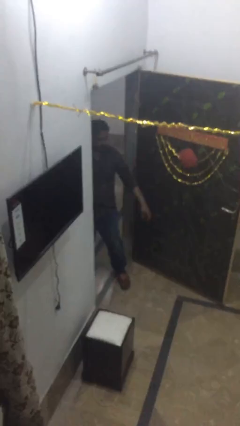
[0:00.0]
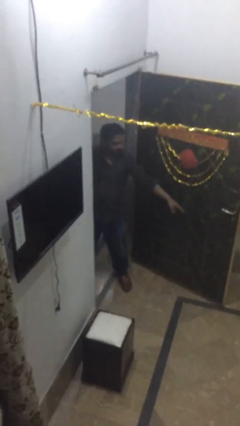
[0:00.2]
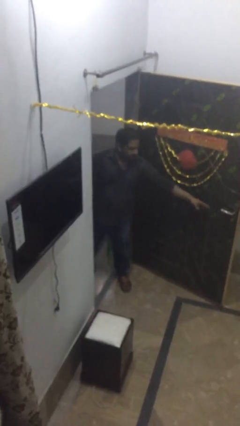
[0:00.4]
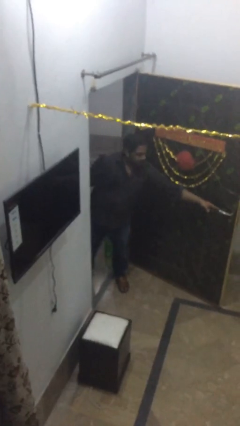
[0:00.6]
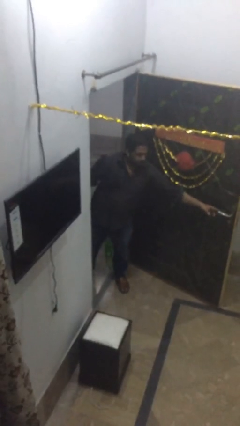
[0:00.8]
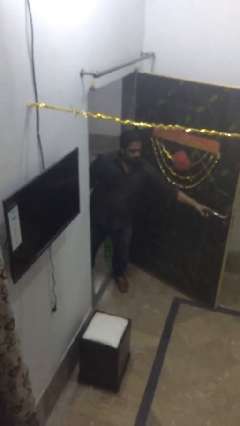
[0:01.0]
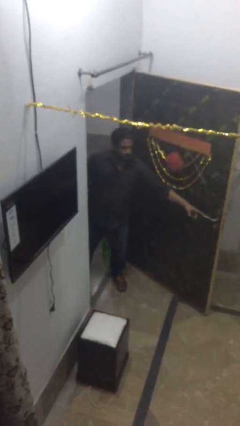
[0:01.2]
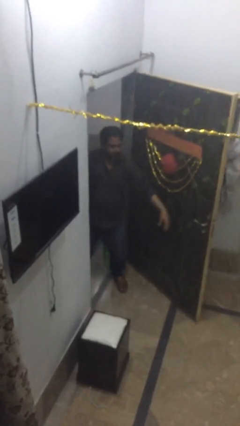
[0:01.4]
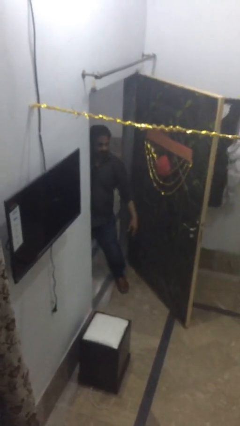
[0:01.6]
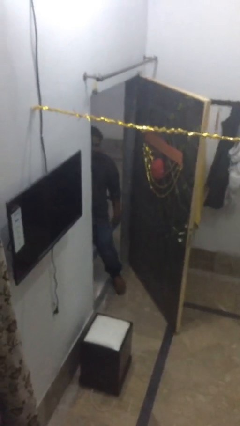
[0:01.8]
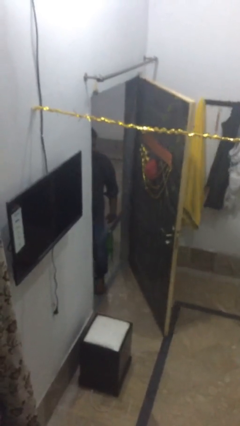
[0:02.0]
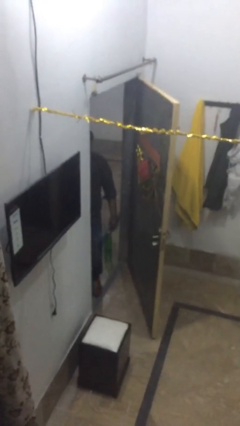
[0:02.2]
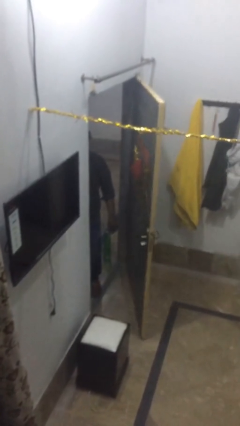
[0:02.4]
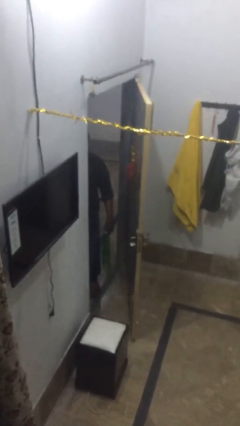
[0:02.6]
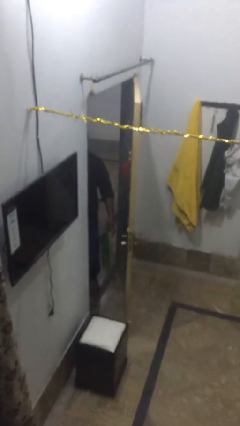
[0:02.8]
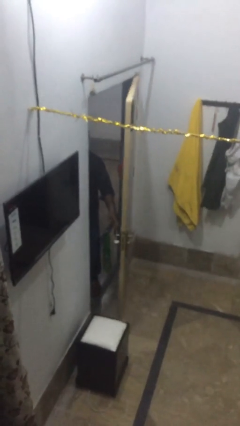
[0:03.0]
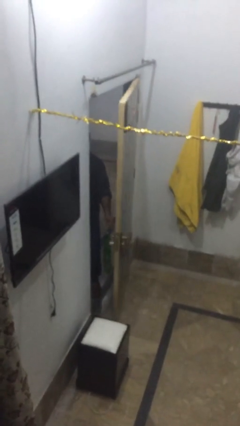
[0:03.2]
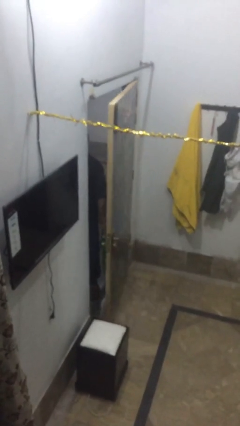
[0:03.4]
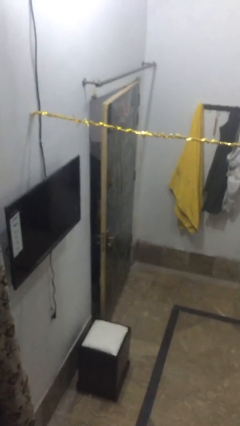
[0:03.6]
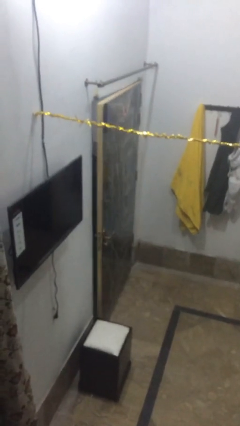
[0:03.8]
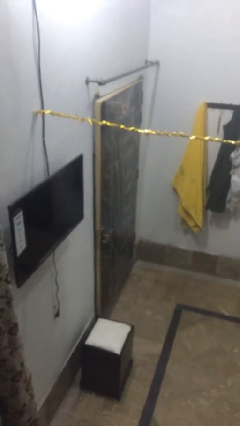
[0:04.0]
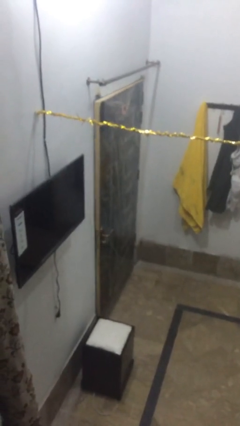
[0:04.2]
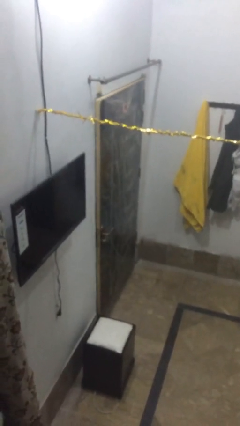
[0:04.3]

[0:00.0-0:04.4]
person closes facility door

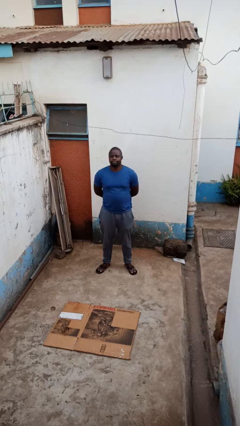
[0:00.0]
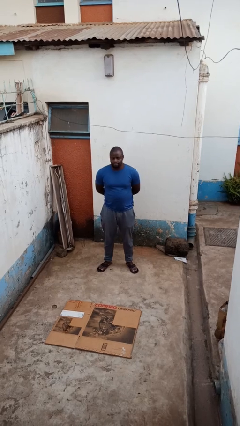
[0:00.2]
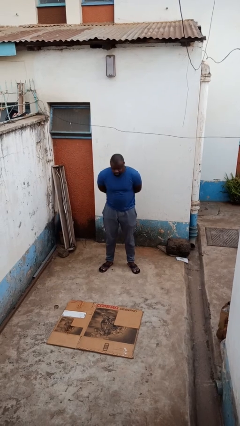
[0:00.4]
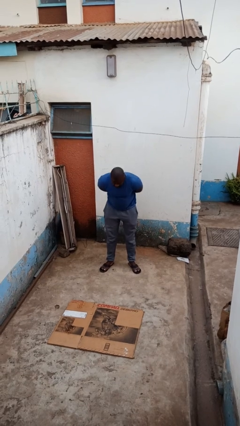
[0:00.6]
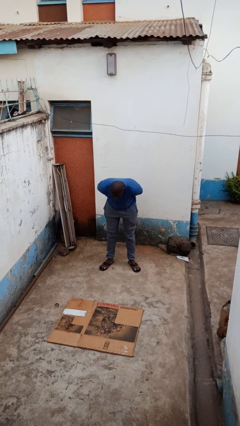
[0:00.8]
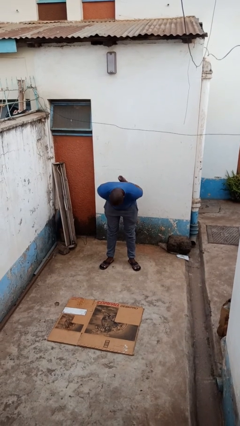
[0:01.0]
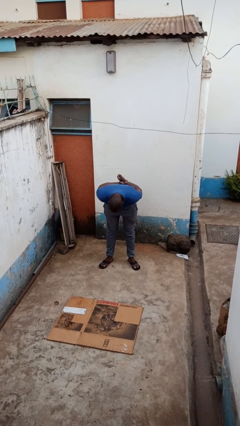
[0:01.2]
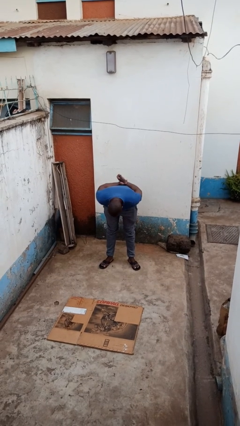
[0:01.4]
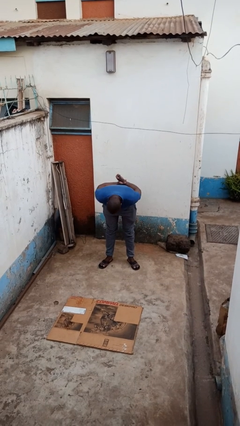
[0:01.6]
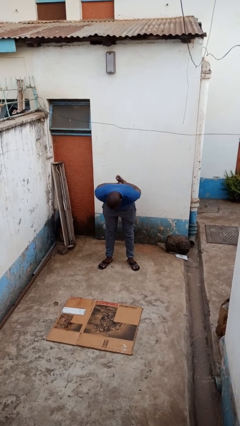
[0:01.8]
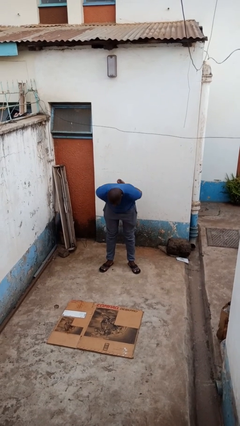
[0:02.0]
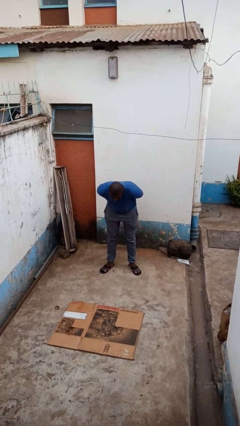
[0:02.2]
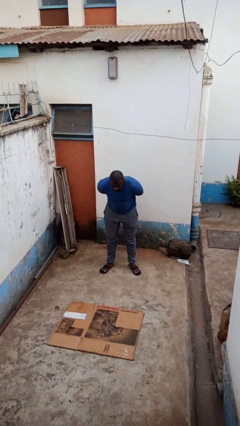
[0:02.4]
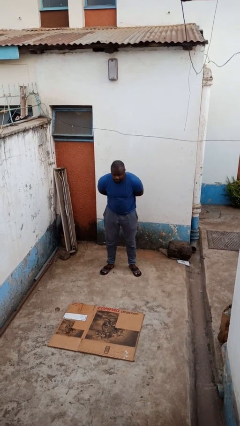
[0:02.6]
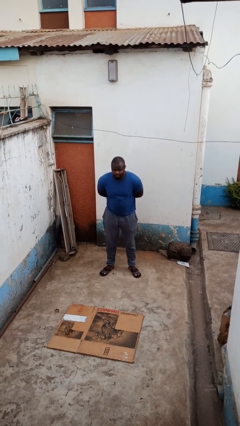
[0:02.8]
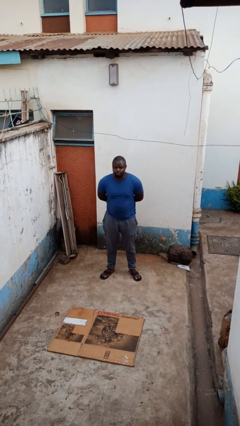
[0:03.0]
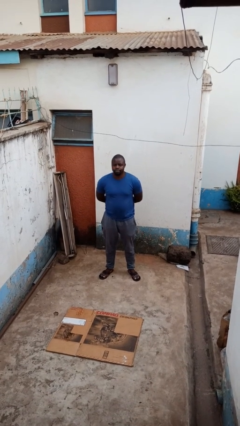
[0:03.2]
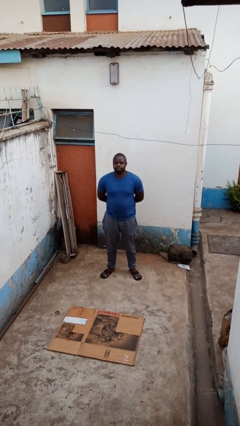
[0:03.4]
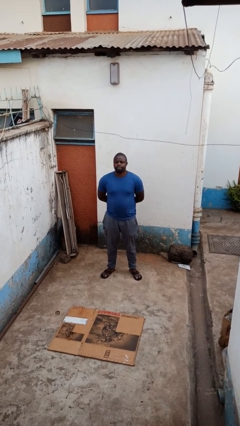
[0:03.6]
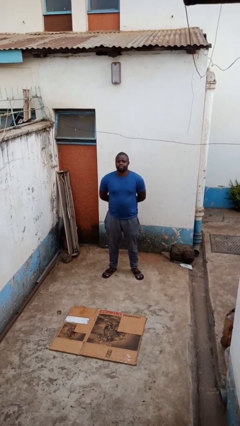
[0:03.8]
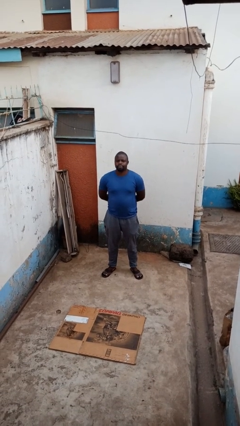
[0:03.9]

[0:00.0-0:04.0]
person bows

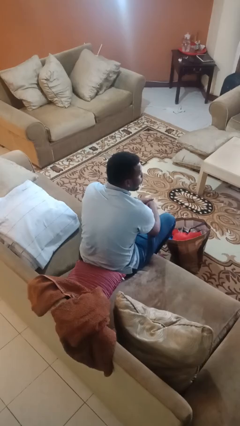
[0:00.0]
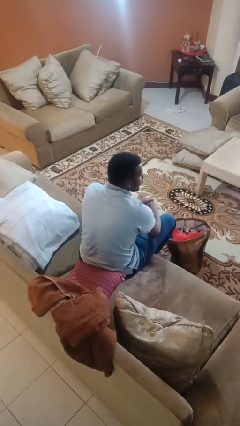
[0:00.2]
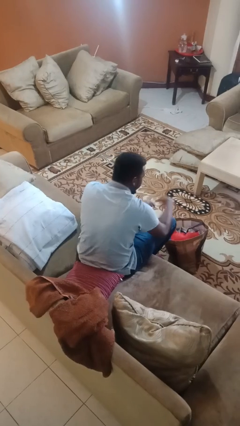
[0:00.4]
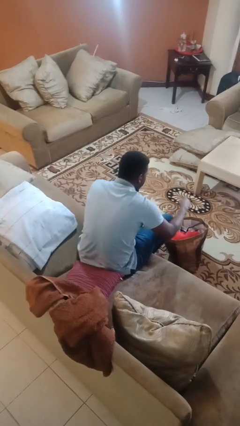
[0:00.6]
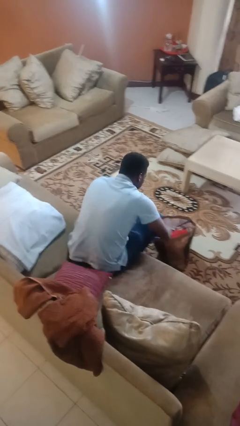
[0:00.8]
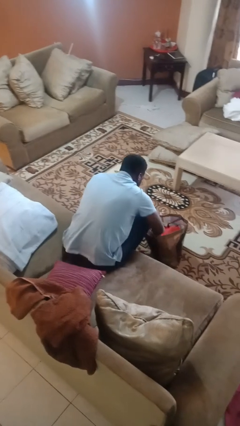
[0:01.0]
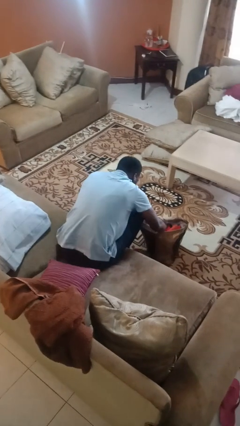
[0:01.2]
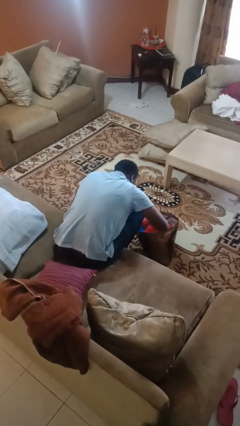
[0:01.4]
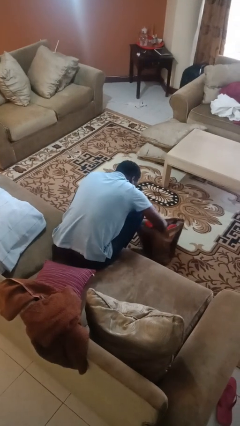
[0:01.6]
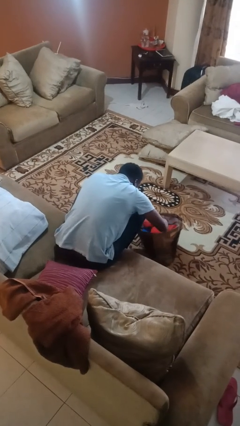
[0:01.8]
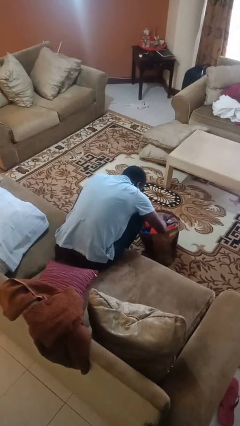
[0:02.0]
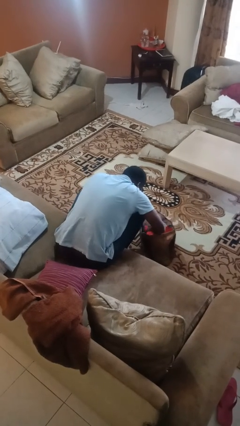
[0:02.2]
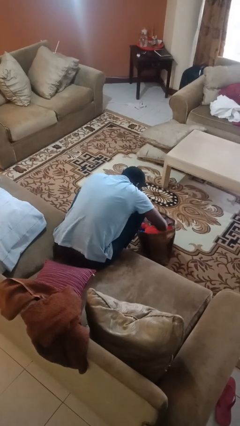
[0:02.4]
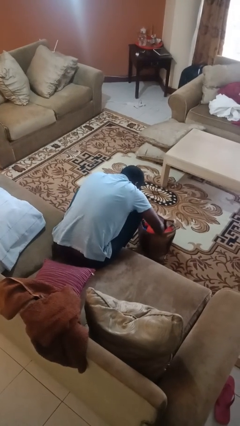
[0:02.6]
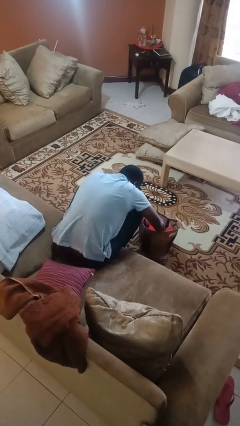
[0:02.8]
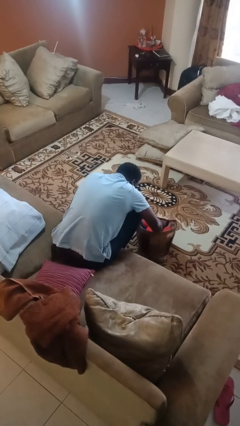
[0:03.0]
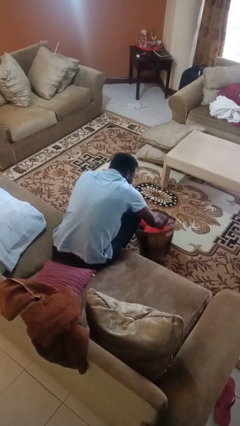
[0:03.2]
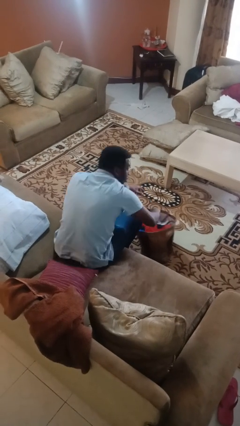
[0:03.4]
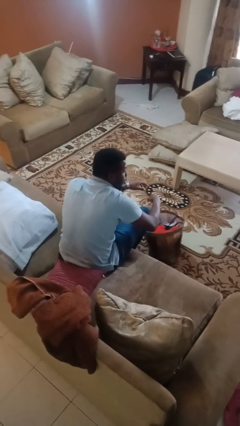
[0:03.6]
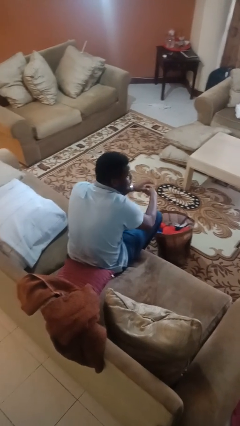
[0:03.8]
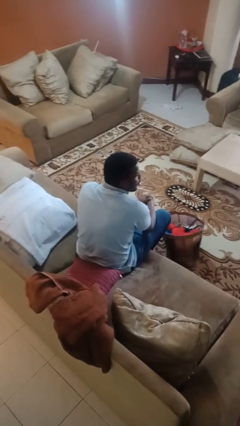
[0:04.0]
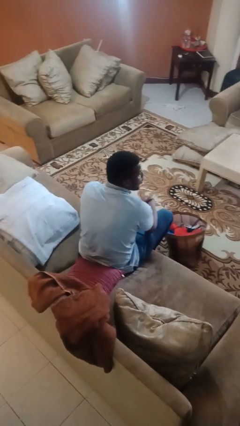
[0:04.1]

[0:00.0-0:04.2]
person searches in bag

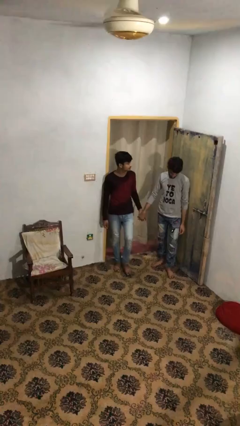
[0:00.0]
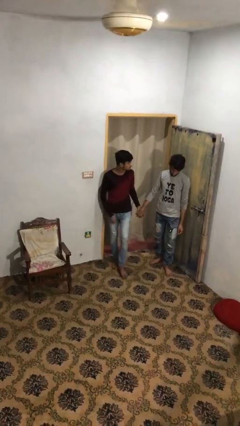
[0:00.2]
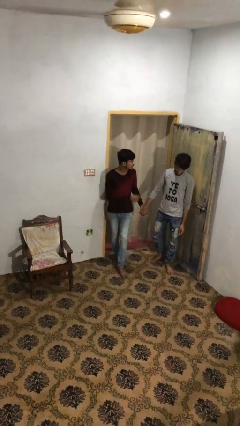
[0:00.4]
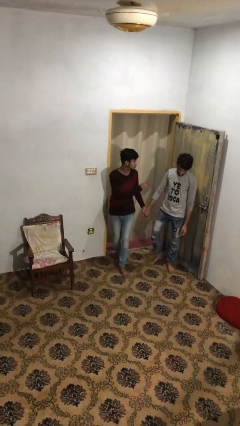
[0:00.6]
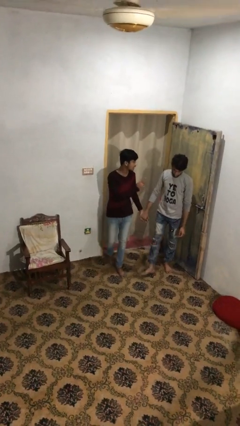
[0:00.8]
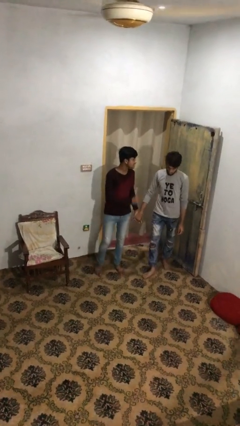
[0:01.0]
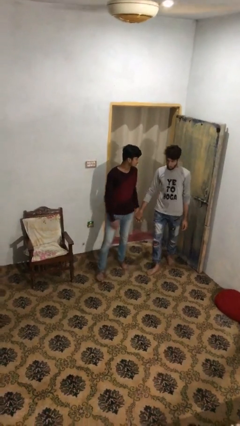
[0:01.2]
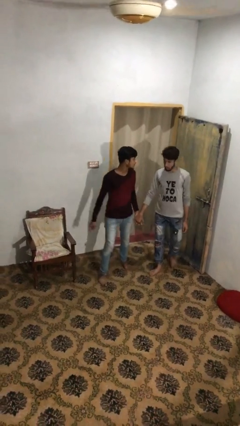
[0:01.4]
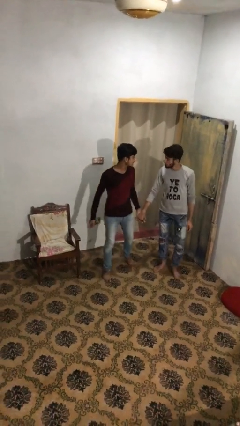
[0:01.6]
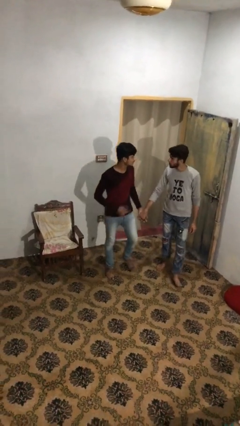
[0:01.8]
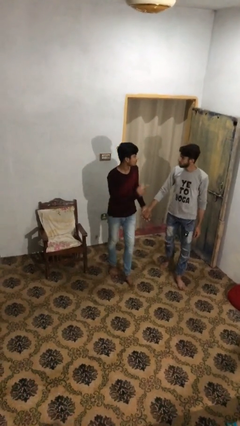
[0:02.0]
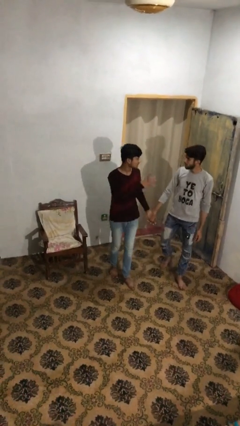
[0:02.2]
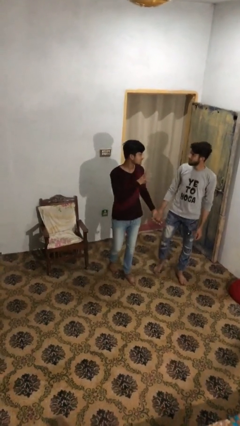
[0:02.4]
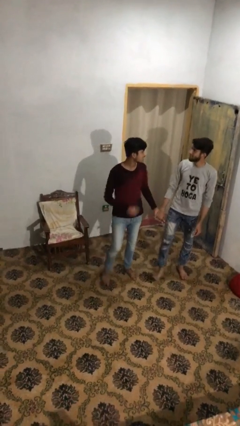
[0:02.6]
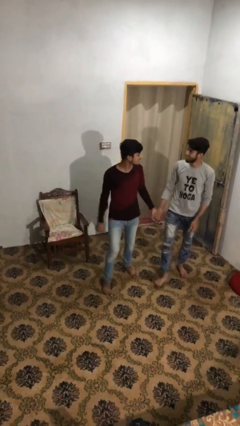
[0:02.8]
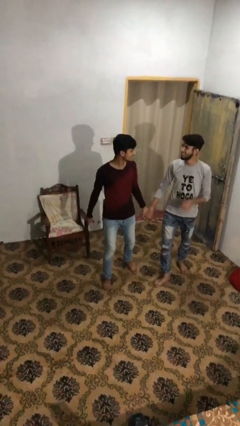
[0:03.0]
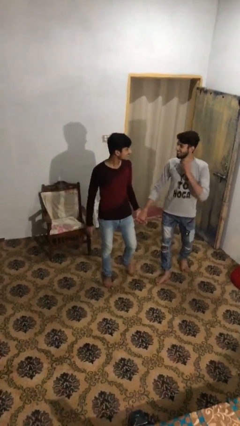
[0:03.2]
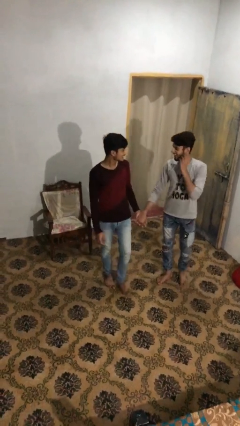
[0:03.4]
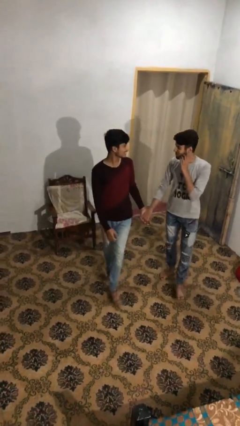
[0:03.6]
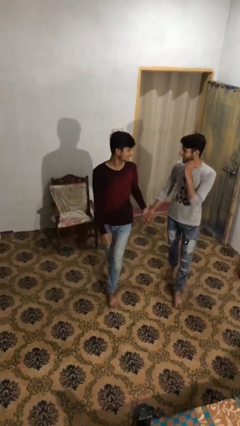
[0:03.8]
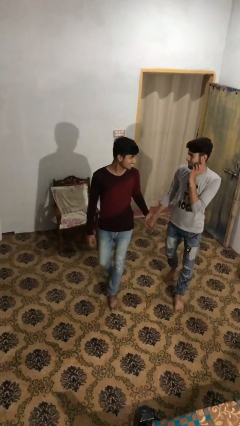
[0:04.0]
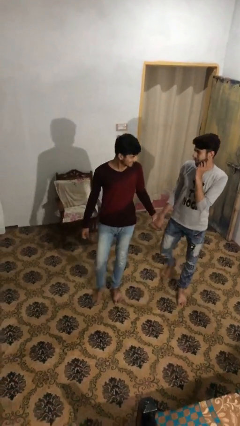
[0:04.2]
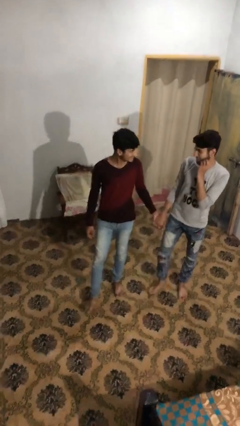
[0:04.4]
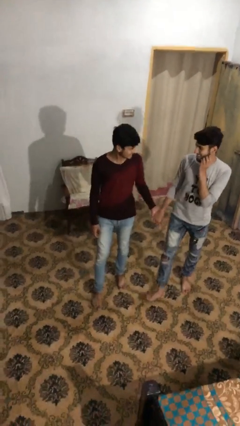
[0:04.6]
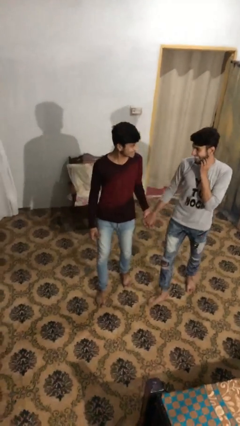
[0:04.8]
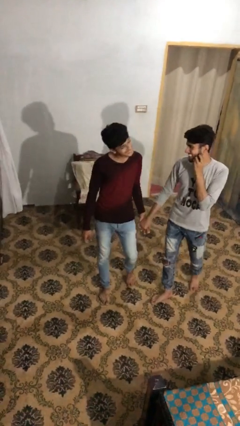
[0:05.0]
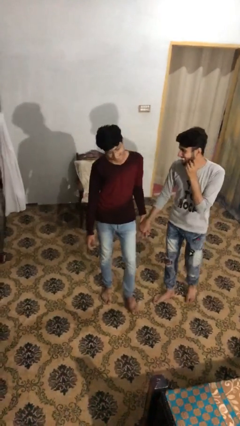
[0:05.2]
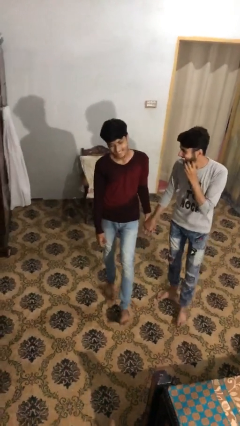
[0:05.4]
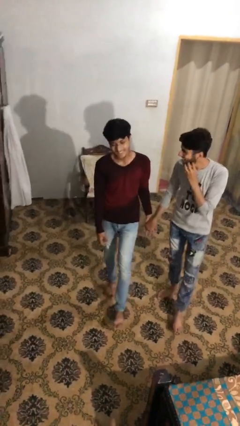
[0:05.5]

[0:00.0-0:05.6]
person holds hand
